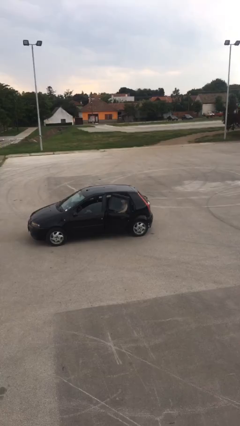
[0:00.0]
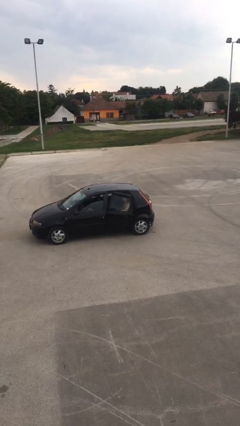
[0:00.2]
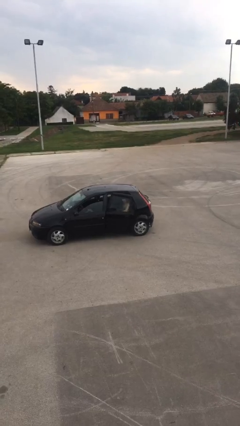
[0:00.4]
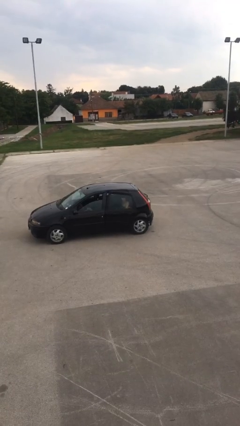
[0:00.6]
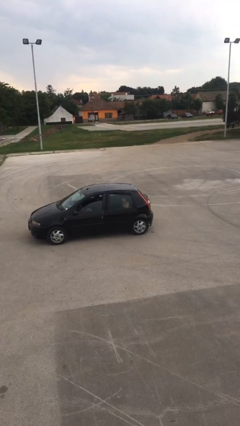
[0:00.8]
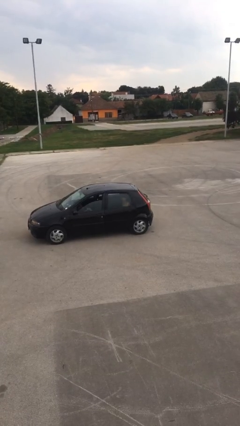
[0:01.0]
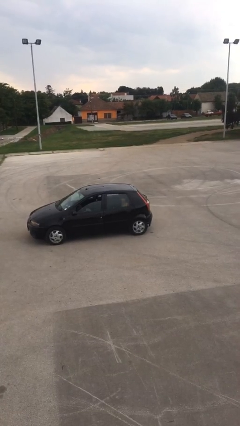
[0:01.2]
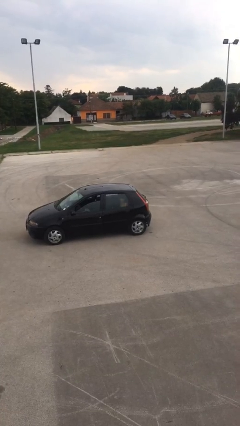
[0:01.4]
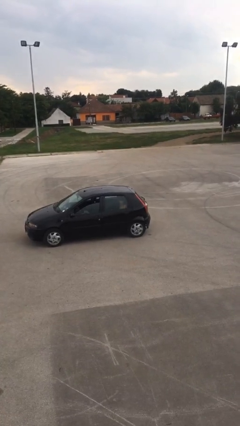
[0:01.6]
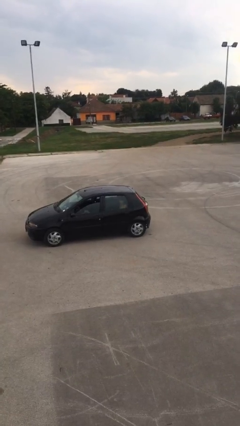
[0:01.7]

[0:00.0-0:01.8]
person closes car door

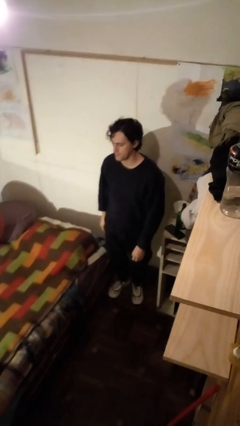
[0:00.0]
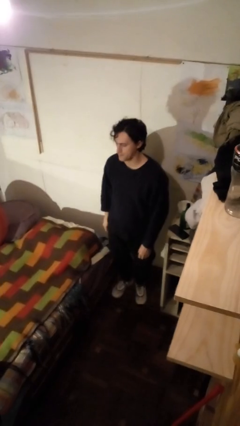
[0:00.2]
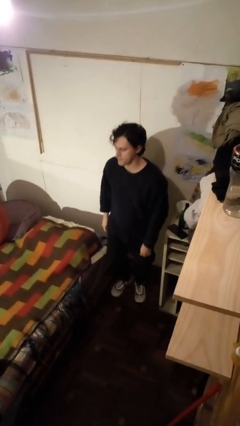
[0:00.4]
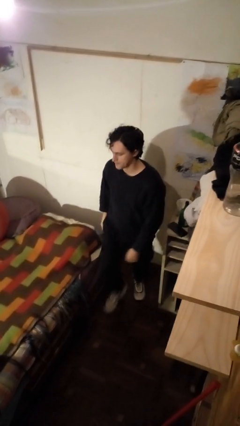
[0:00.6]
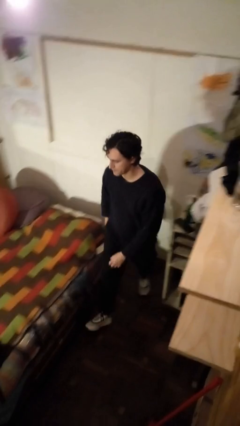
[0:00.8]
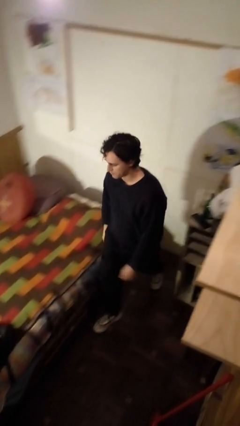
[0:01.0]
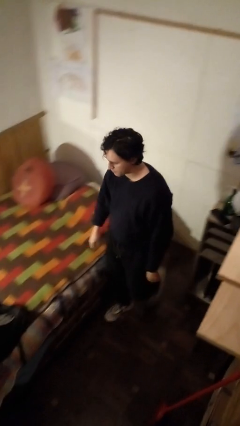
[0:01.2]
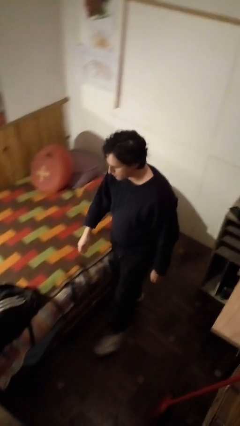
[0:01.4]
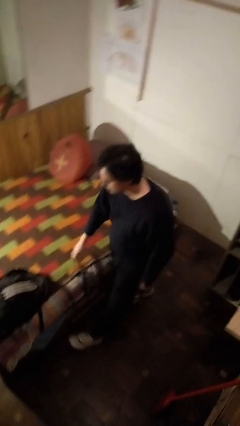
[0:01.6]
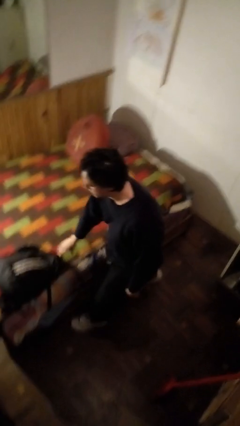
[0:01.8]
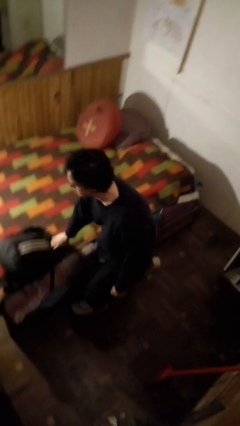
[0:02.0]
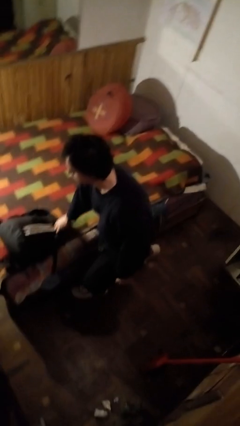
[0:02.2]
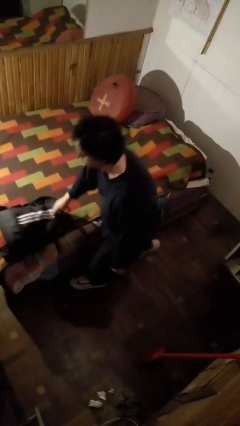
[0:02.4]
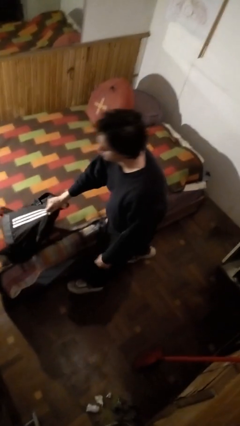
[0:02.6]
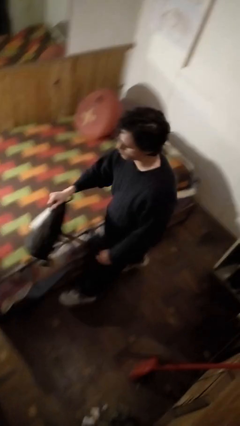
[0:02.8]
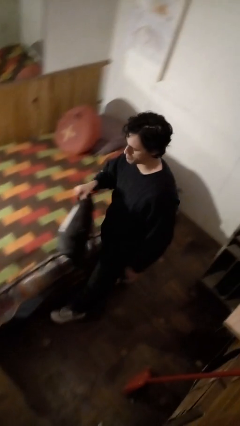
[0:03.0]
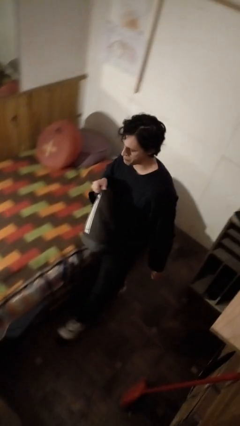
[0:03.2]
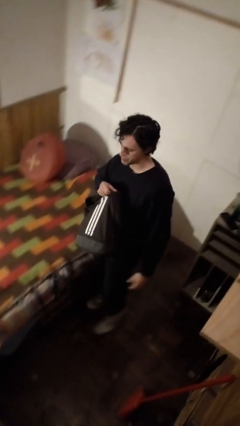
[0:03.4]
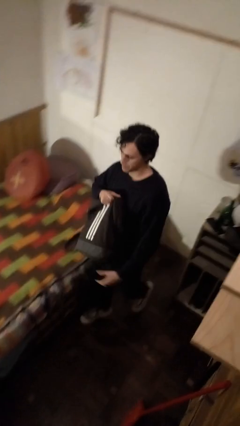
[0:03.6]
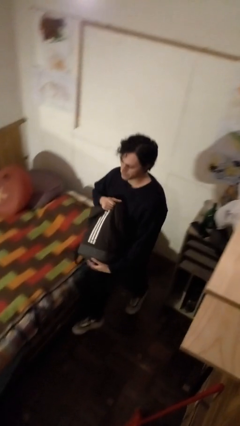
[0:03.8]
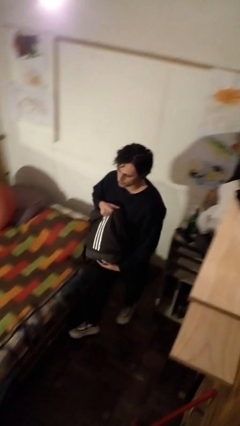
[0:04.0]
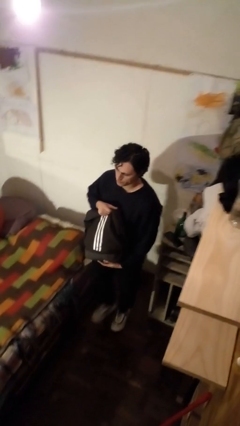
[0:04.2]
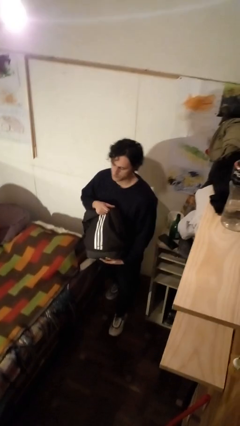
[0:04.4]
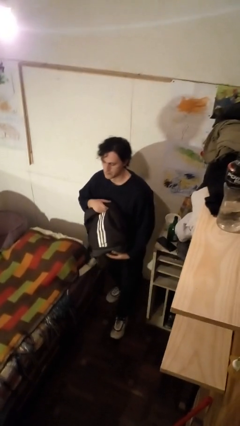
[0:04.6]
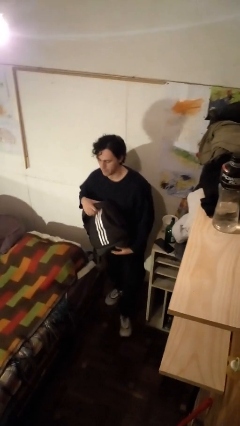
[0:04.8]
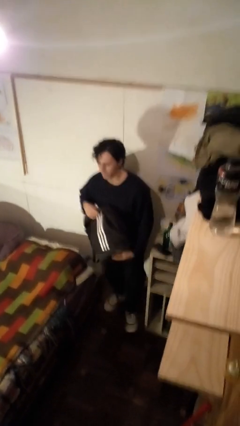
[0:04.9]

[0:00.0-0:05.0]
person picks up object from bed

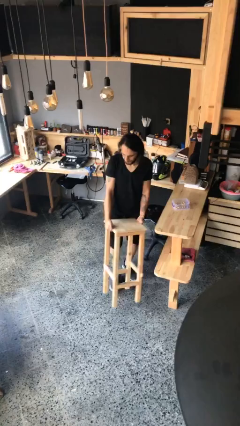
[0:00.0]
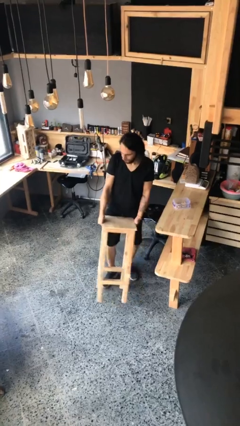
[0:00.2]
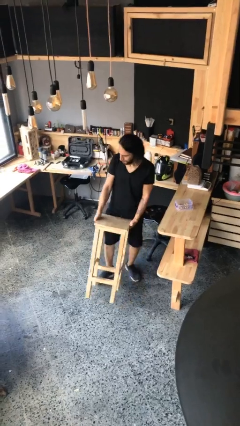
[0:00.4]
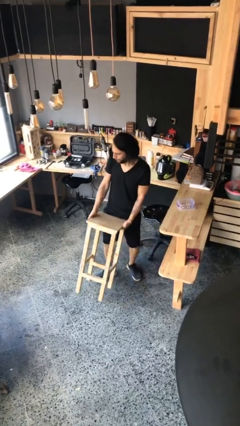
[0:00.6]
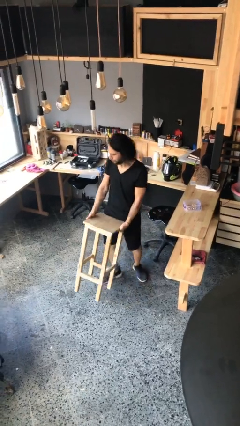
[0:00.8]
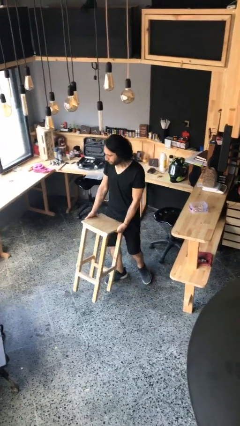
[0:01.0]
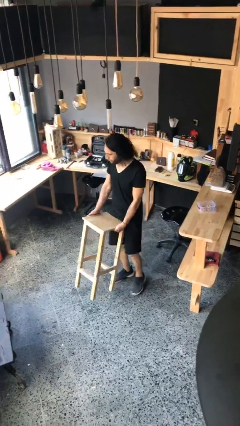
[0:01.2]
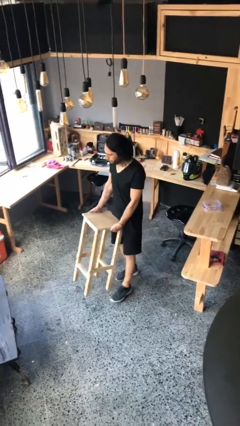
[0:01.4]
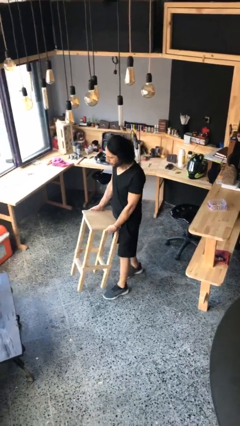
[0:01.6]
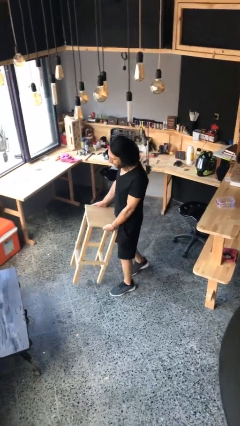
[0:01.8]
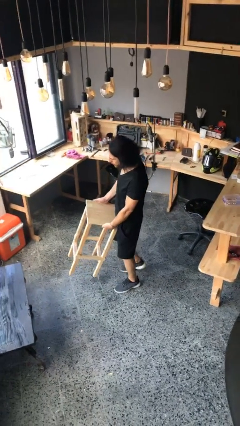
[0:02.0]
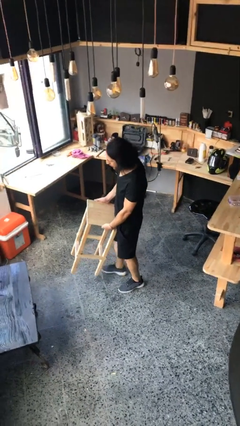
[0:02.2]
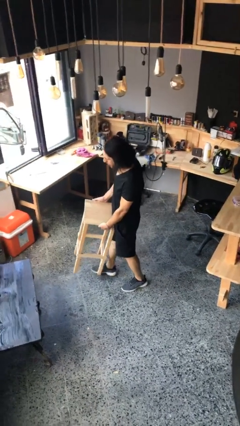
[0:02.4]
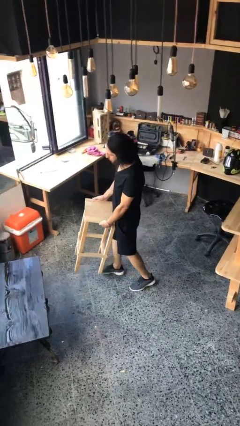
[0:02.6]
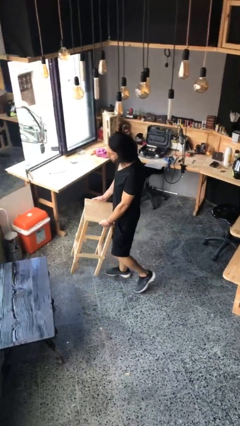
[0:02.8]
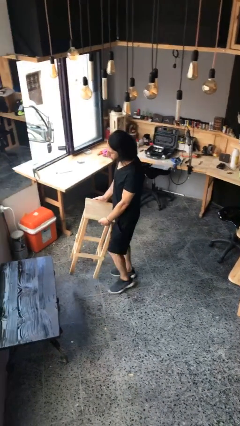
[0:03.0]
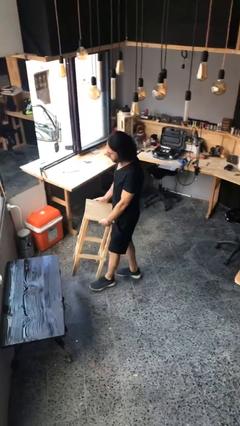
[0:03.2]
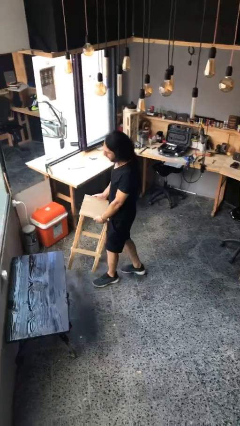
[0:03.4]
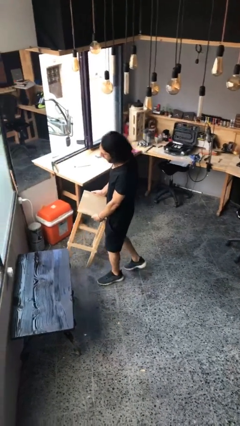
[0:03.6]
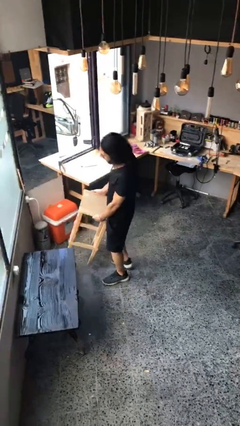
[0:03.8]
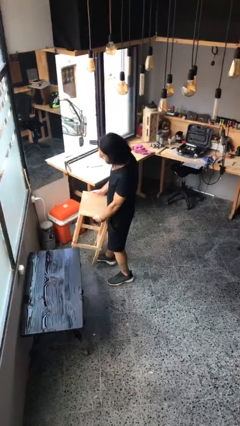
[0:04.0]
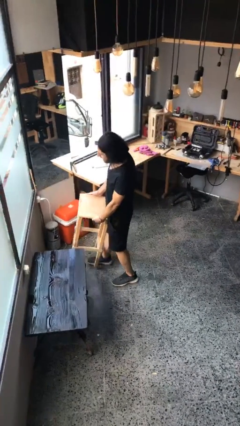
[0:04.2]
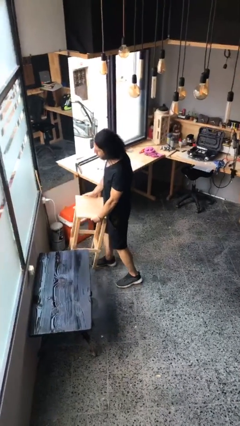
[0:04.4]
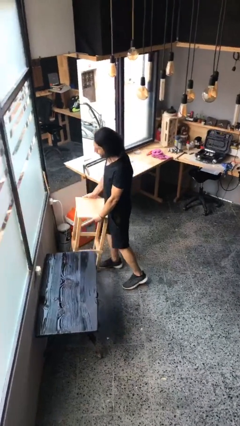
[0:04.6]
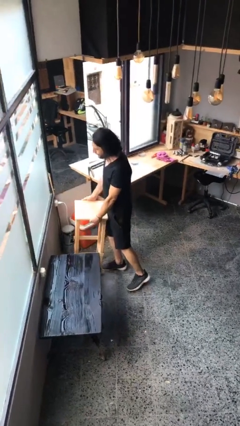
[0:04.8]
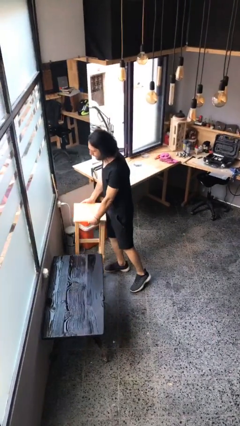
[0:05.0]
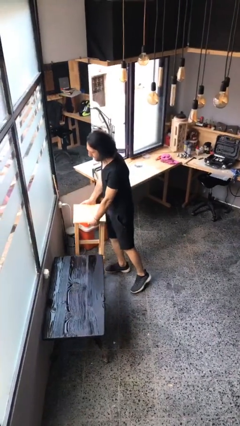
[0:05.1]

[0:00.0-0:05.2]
person carries heavy object

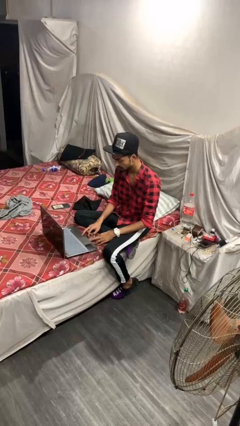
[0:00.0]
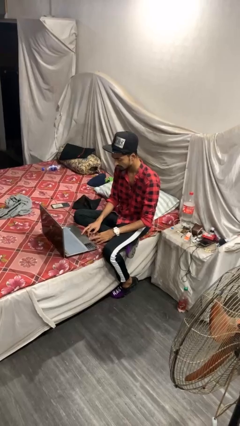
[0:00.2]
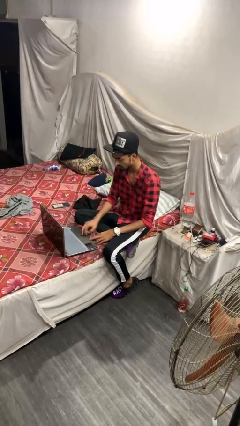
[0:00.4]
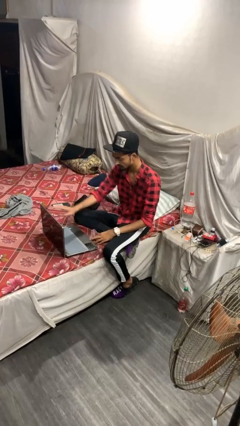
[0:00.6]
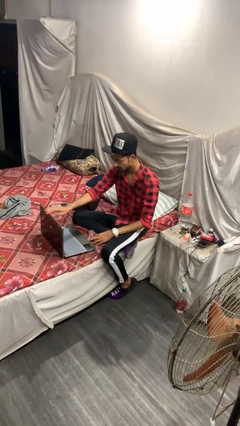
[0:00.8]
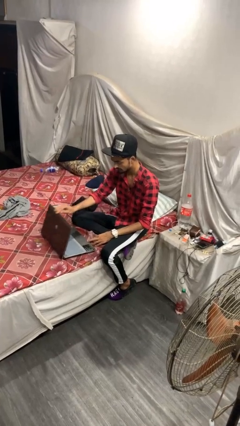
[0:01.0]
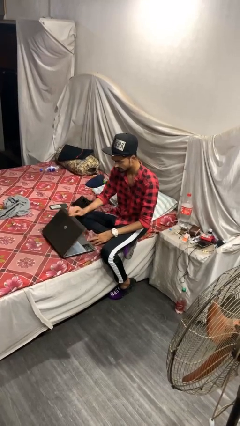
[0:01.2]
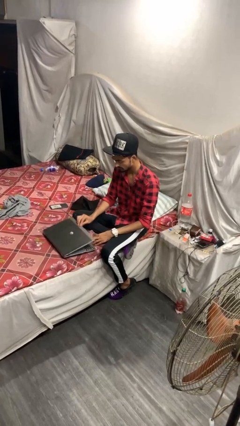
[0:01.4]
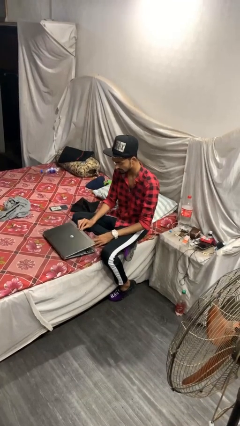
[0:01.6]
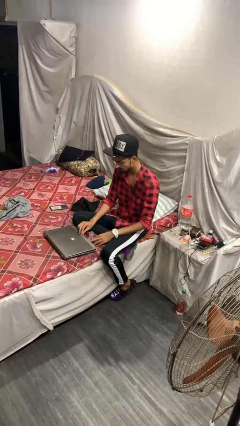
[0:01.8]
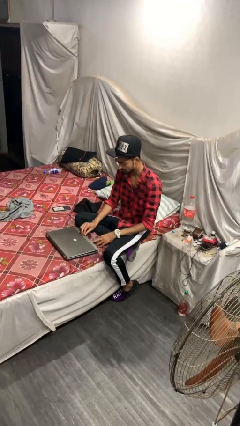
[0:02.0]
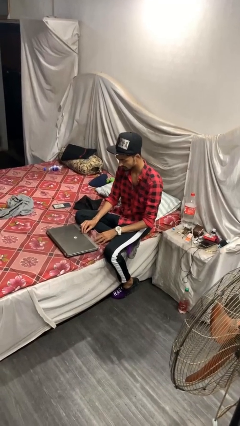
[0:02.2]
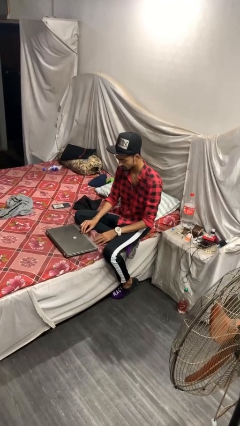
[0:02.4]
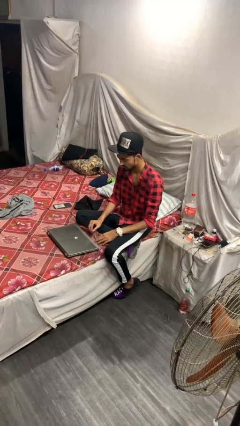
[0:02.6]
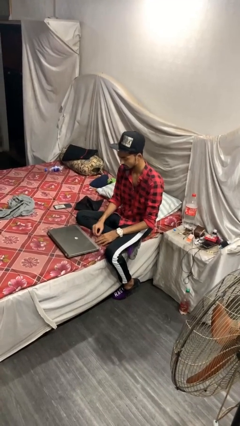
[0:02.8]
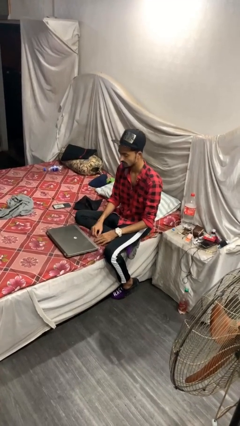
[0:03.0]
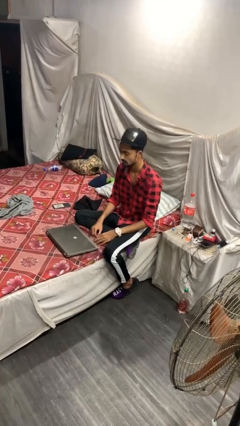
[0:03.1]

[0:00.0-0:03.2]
person closes laptop

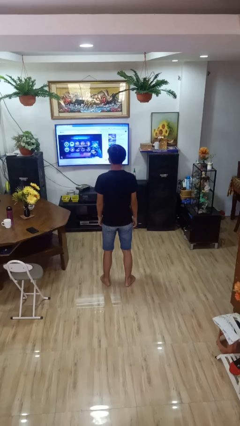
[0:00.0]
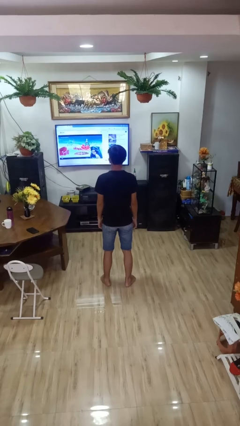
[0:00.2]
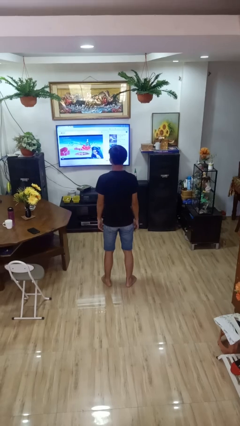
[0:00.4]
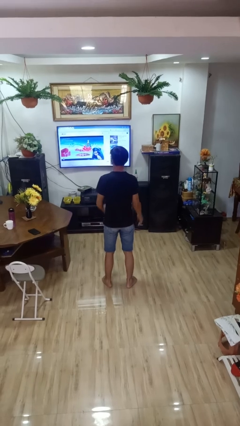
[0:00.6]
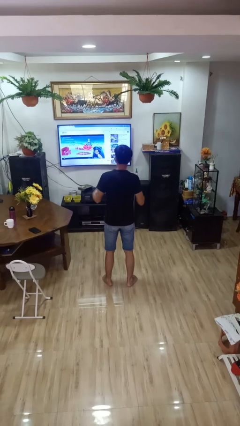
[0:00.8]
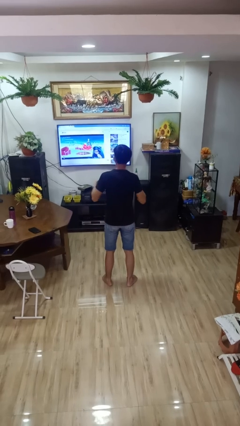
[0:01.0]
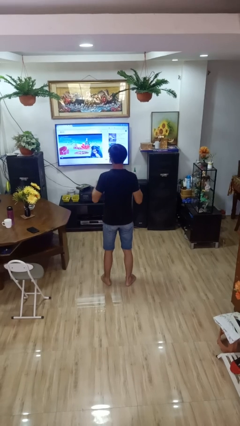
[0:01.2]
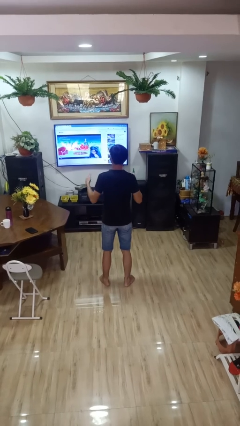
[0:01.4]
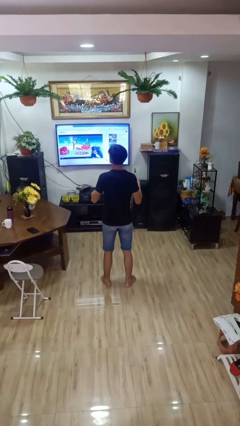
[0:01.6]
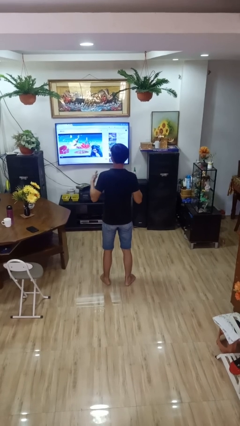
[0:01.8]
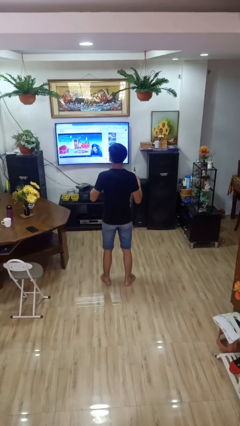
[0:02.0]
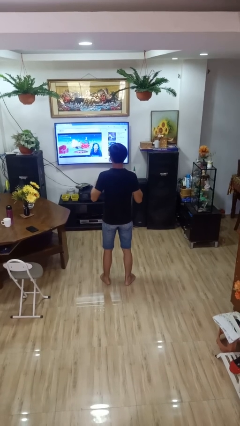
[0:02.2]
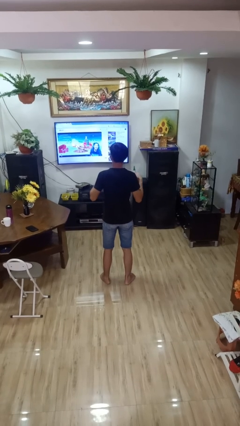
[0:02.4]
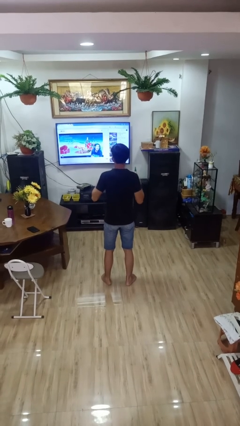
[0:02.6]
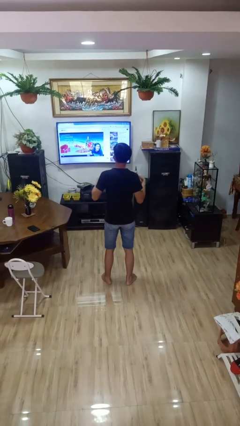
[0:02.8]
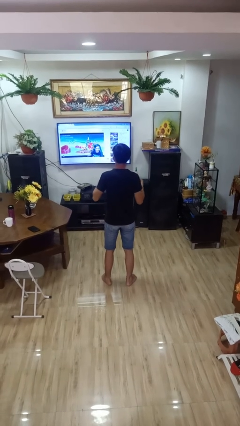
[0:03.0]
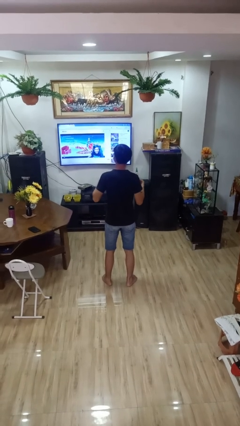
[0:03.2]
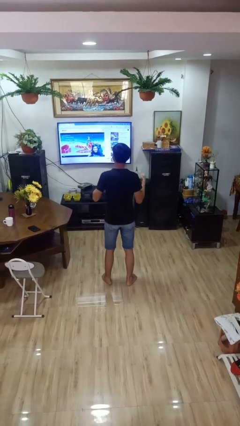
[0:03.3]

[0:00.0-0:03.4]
person drums on chest
